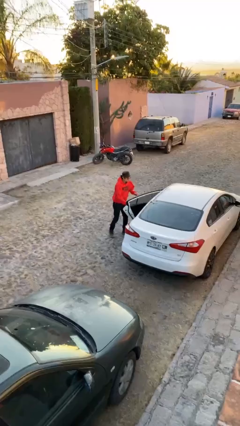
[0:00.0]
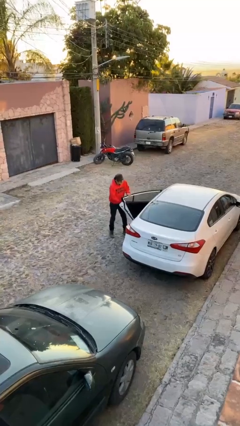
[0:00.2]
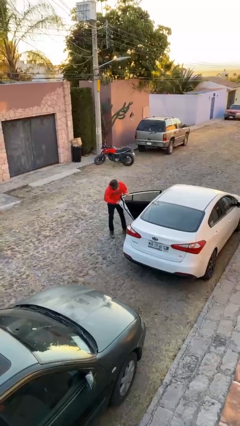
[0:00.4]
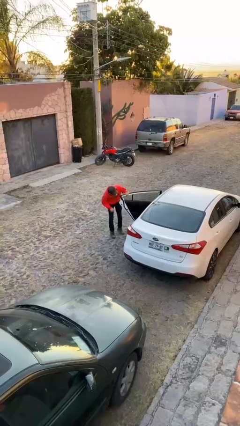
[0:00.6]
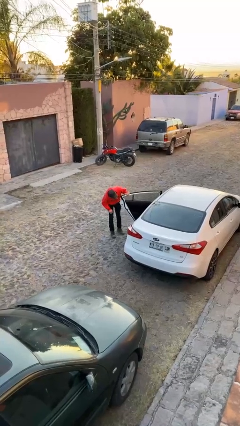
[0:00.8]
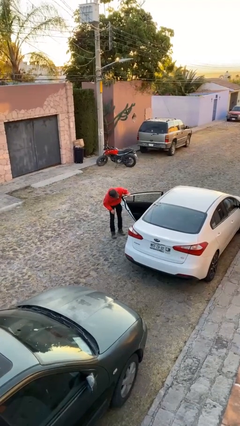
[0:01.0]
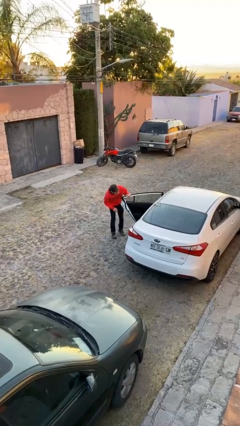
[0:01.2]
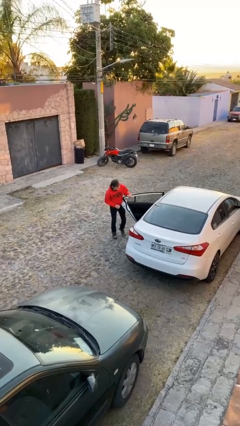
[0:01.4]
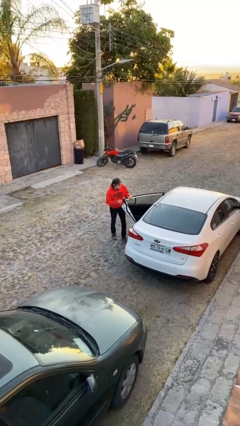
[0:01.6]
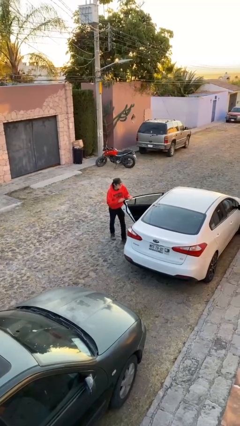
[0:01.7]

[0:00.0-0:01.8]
person opens facility door

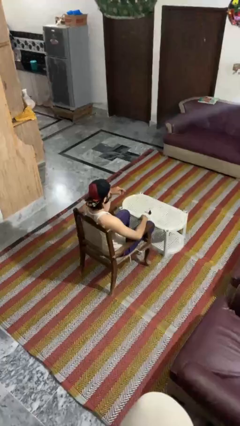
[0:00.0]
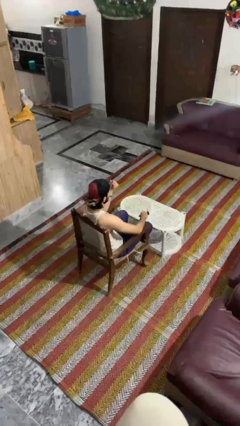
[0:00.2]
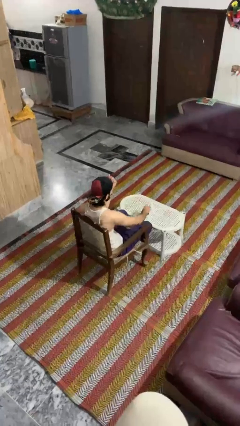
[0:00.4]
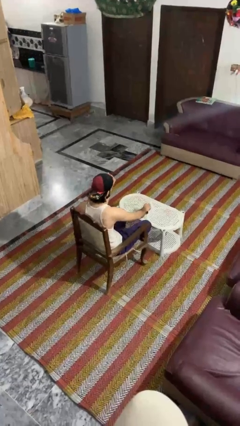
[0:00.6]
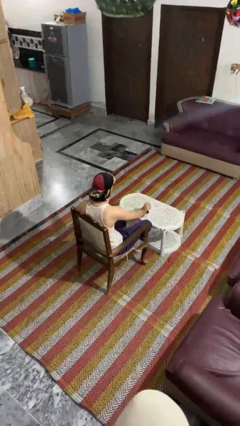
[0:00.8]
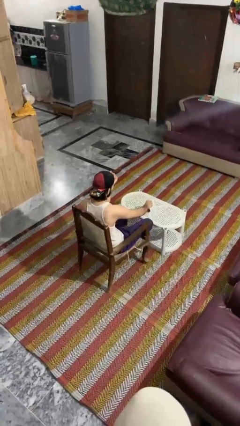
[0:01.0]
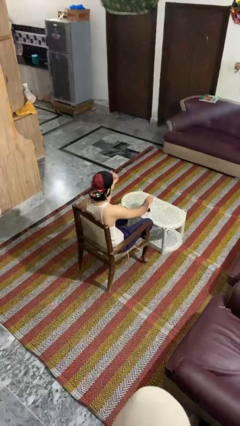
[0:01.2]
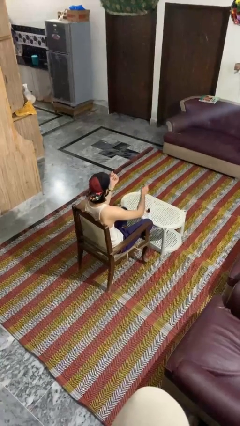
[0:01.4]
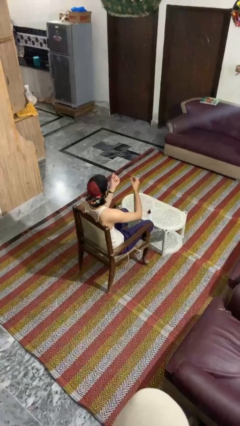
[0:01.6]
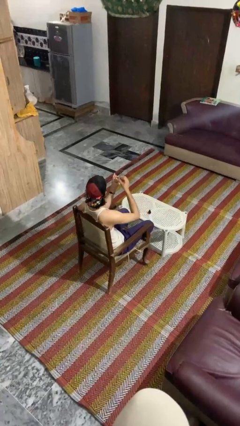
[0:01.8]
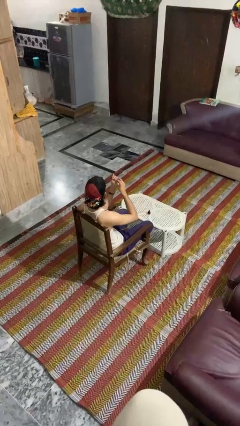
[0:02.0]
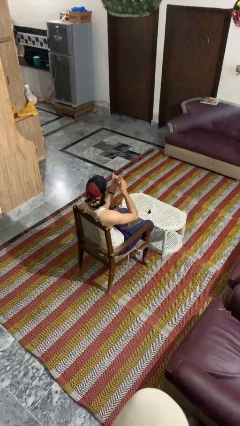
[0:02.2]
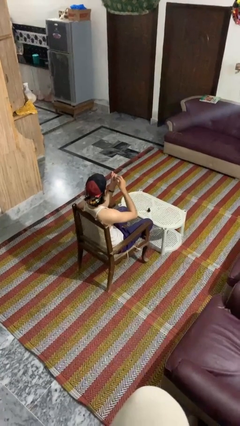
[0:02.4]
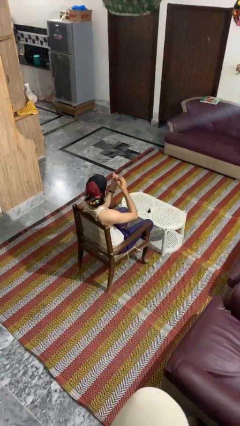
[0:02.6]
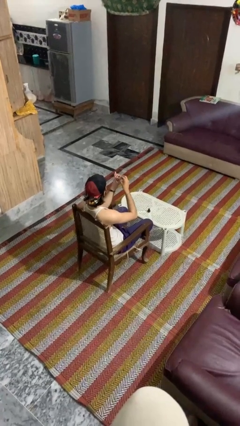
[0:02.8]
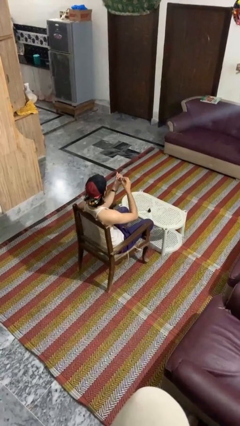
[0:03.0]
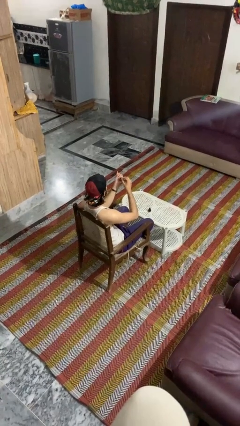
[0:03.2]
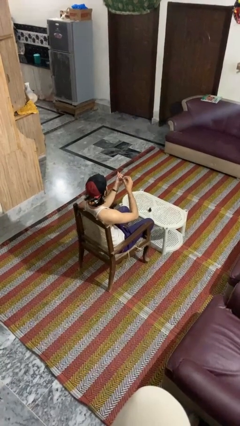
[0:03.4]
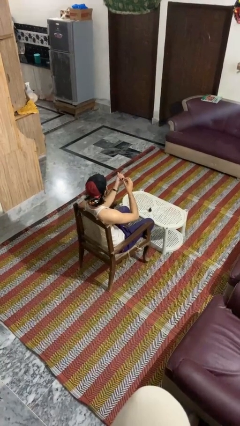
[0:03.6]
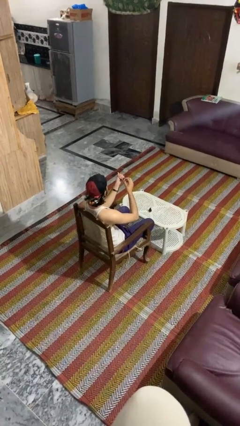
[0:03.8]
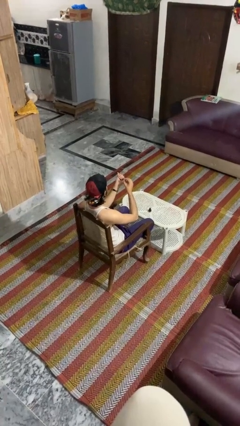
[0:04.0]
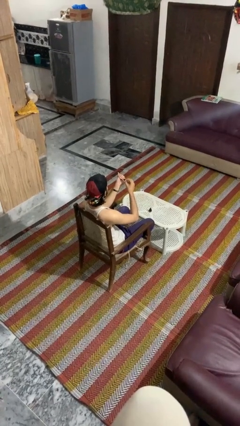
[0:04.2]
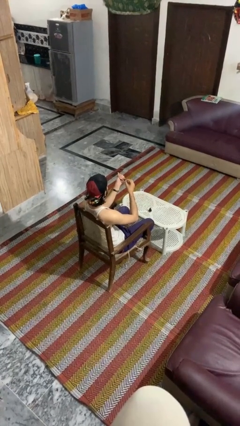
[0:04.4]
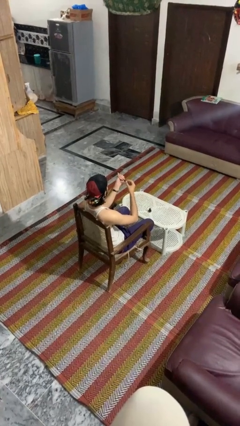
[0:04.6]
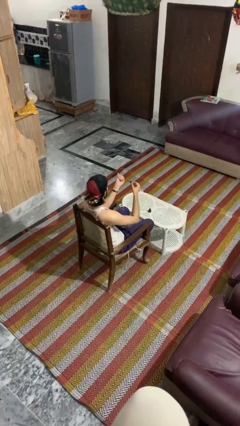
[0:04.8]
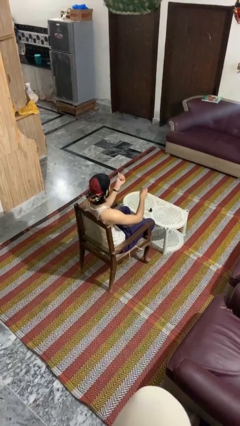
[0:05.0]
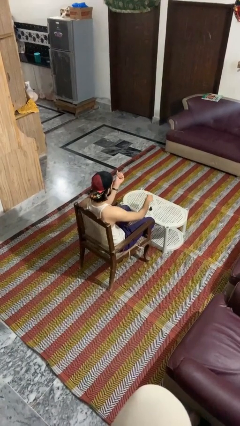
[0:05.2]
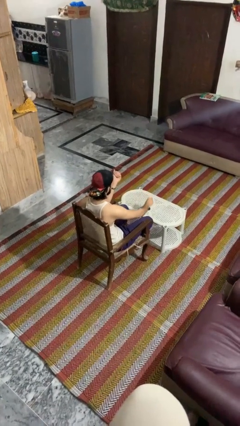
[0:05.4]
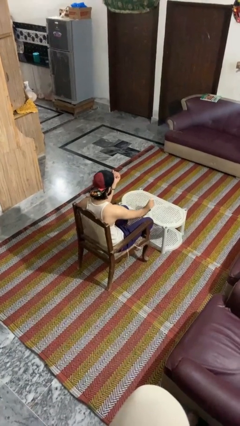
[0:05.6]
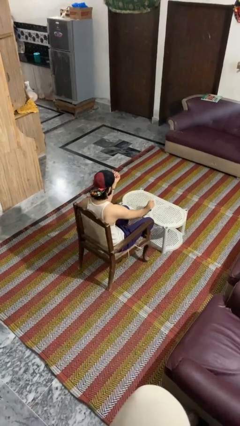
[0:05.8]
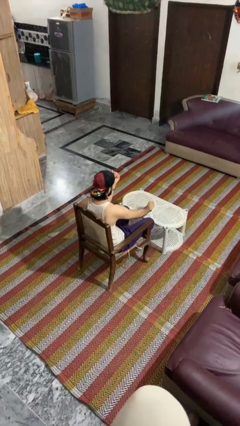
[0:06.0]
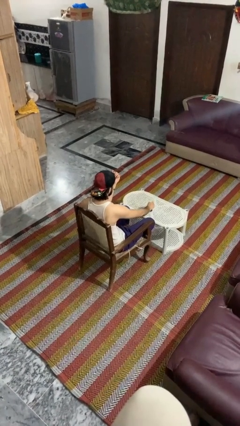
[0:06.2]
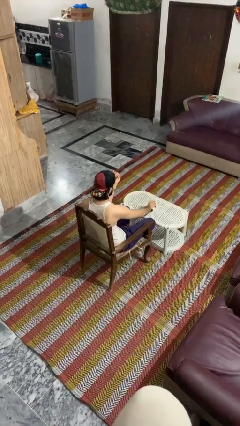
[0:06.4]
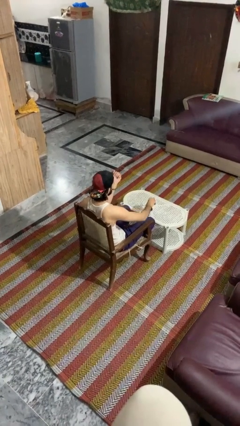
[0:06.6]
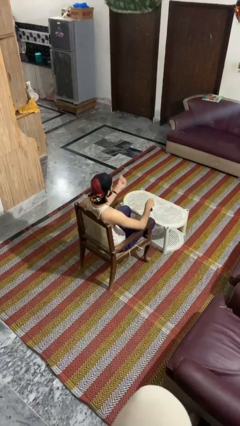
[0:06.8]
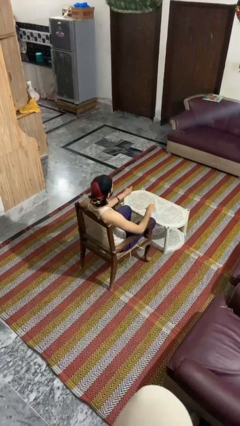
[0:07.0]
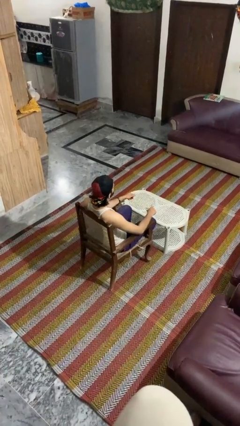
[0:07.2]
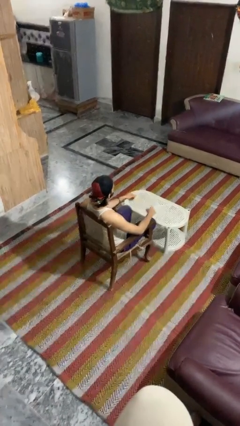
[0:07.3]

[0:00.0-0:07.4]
person paints fingernails

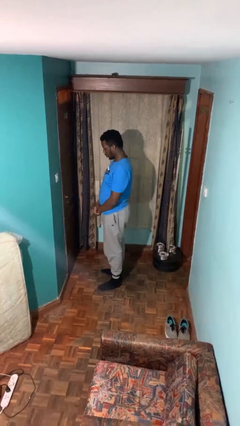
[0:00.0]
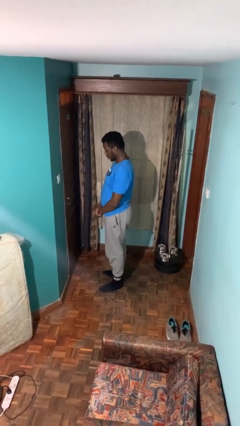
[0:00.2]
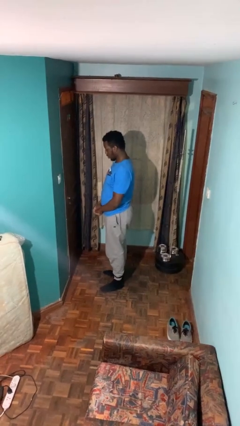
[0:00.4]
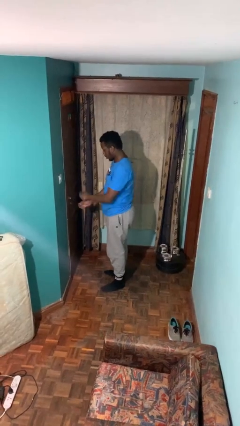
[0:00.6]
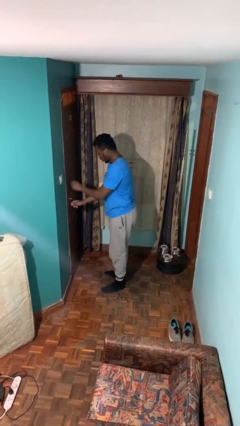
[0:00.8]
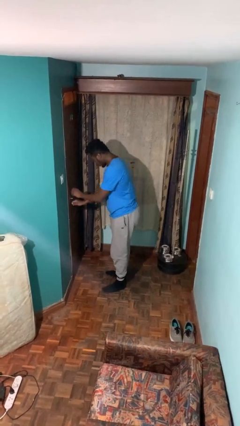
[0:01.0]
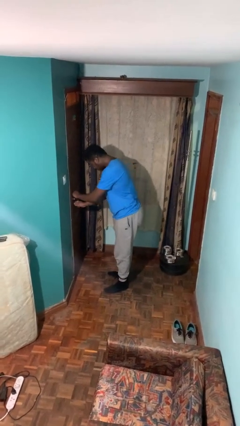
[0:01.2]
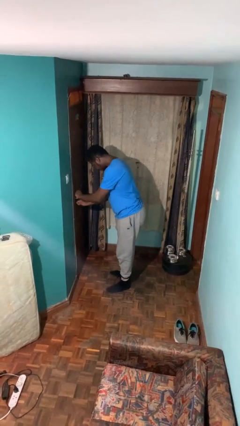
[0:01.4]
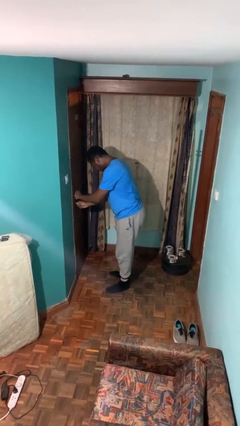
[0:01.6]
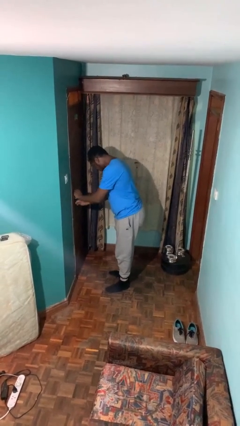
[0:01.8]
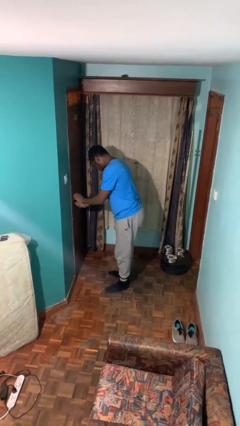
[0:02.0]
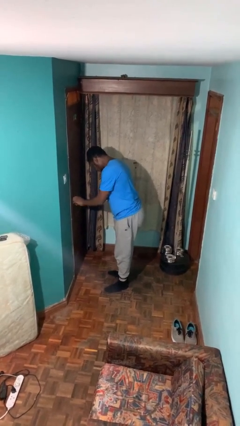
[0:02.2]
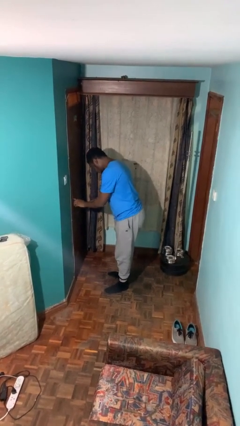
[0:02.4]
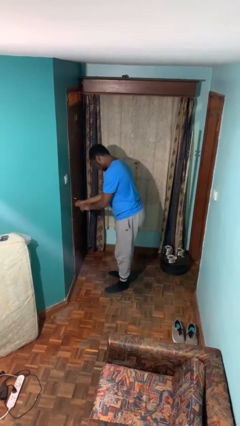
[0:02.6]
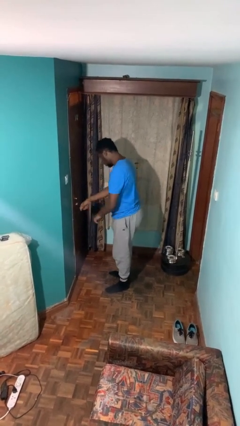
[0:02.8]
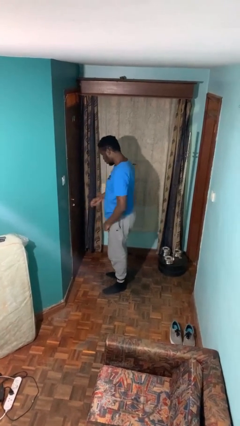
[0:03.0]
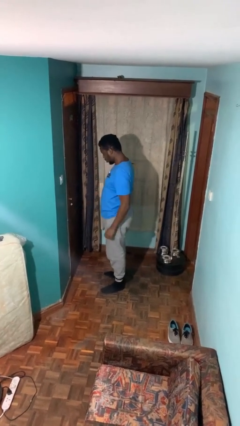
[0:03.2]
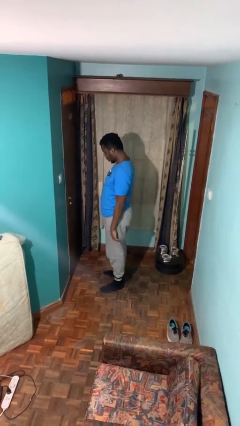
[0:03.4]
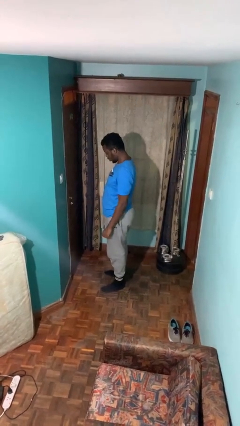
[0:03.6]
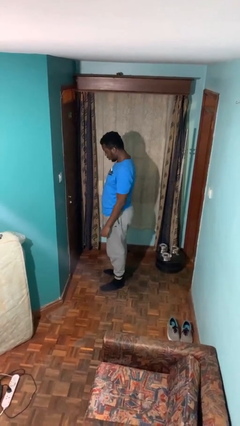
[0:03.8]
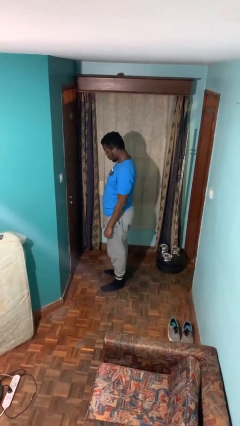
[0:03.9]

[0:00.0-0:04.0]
person unlocks door with keys

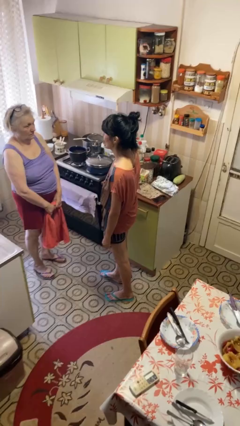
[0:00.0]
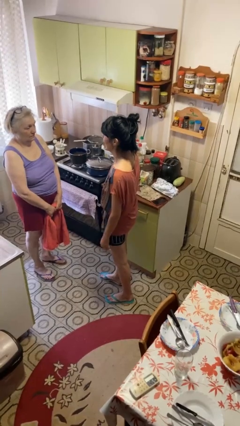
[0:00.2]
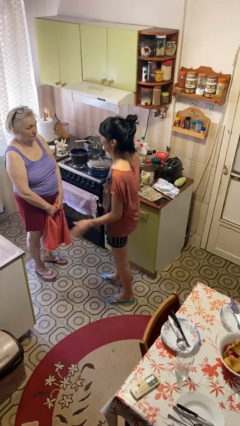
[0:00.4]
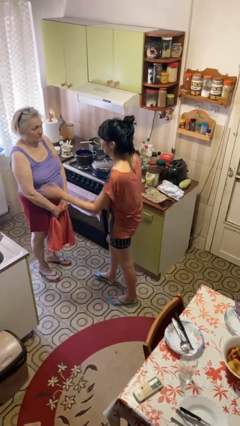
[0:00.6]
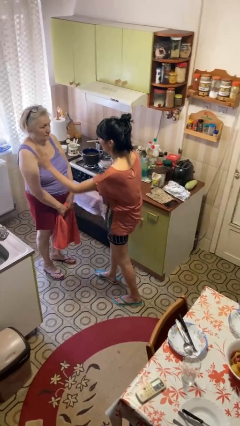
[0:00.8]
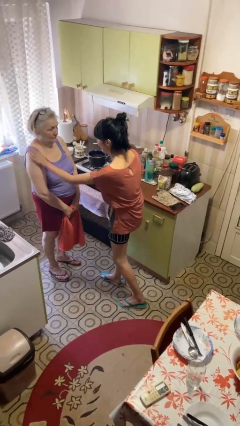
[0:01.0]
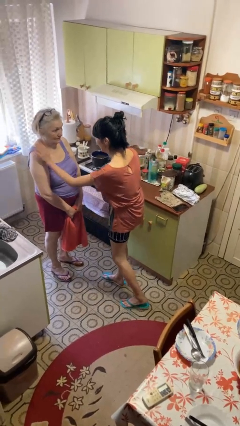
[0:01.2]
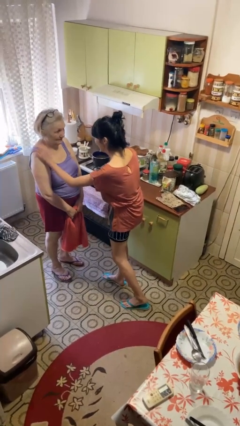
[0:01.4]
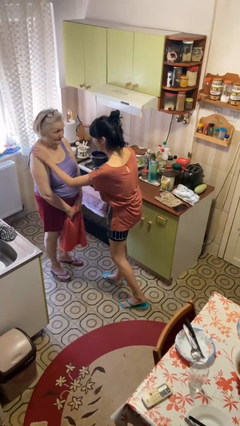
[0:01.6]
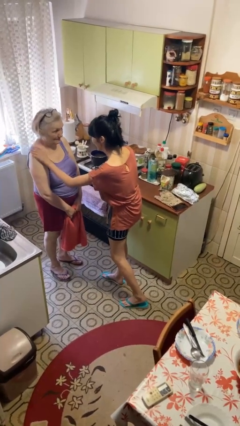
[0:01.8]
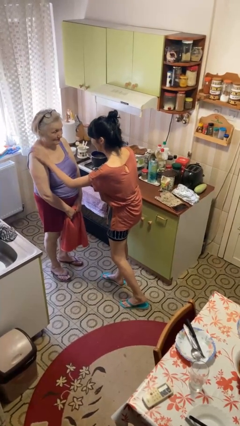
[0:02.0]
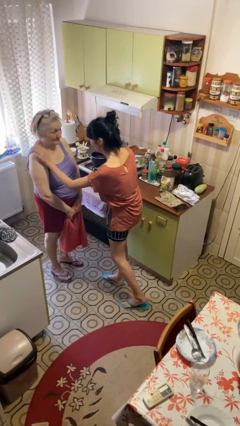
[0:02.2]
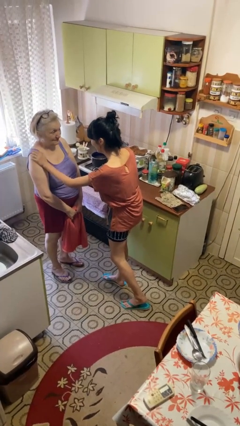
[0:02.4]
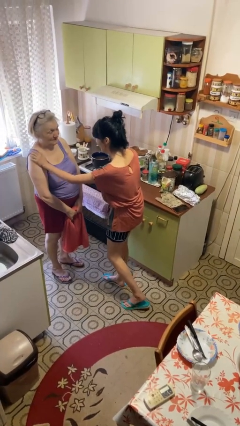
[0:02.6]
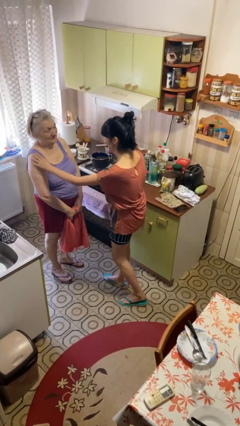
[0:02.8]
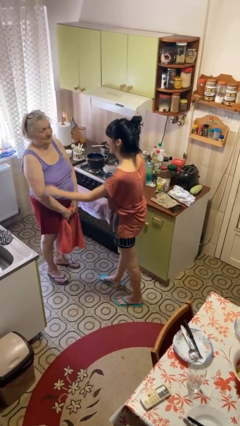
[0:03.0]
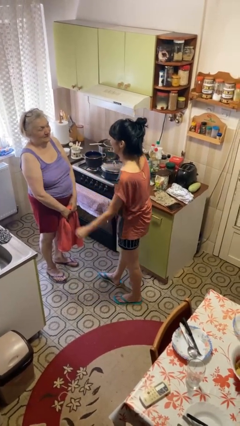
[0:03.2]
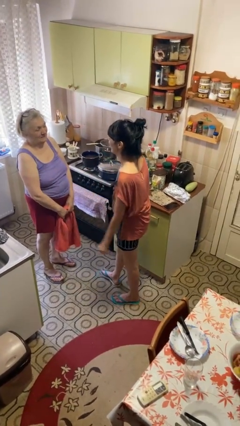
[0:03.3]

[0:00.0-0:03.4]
person pounds shoulders of person

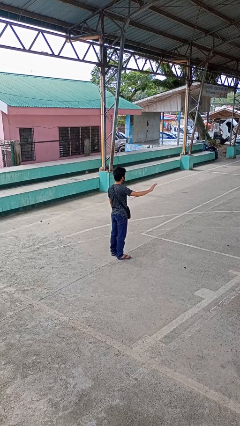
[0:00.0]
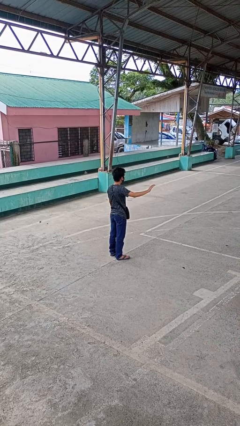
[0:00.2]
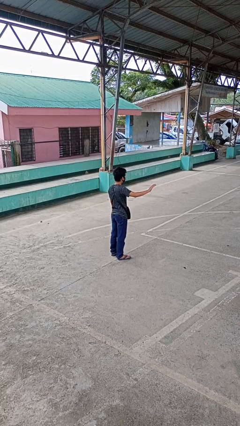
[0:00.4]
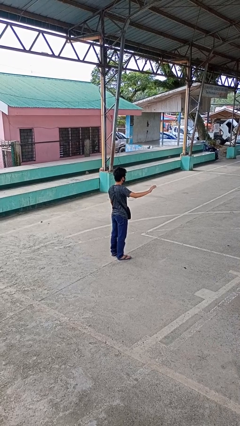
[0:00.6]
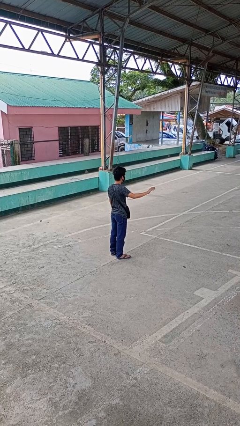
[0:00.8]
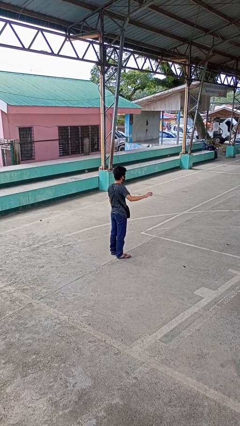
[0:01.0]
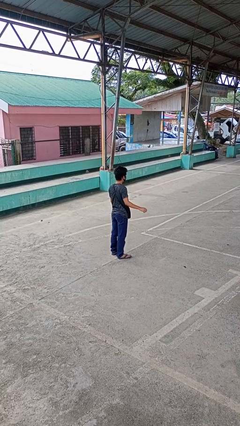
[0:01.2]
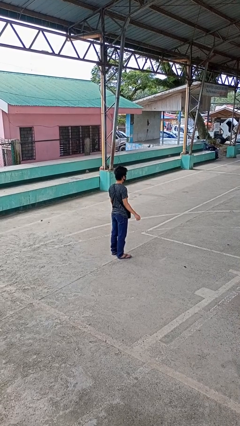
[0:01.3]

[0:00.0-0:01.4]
person gestures swipe right
